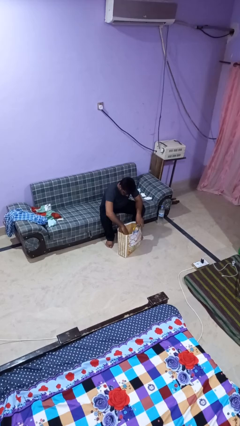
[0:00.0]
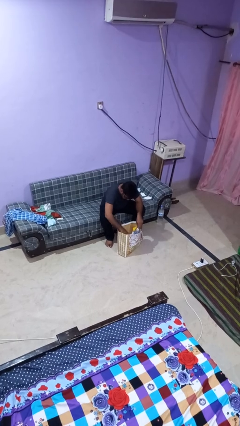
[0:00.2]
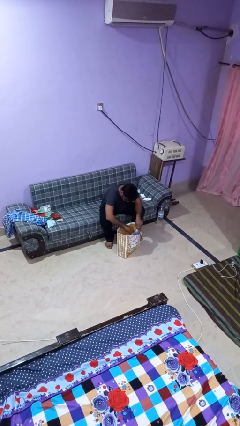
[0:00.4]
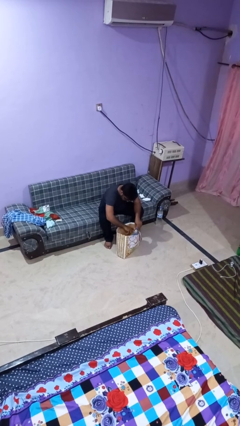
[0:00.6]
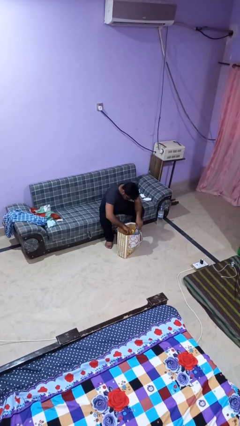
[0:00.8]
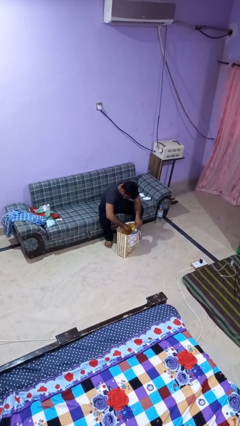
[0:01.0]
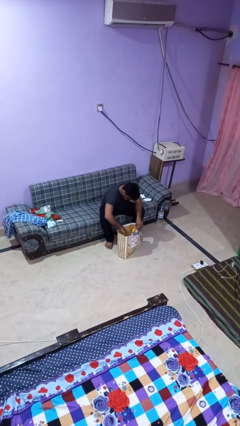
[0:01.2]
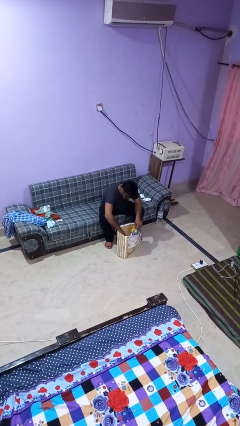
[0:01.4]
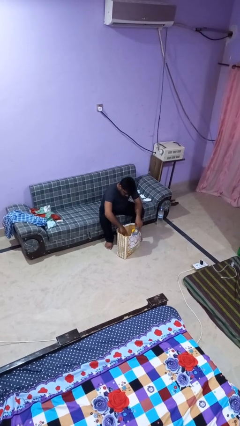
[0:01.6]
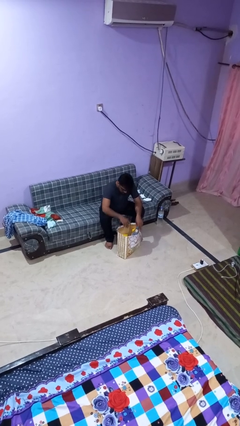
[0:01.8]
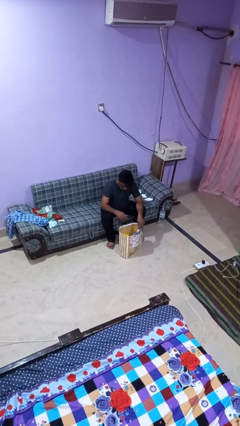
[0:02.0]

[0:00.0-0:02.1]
person searches in bag

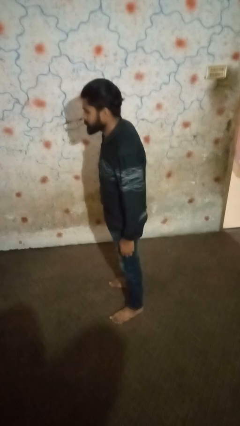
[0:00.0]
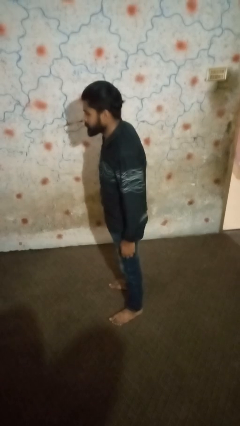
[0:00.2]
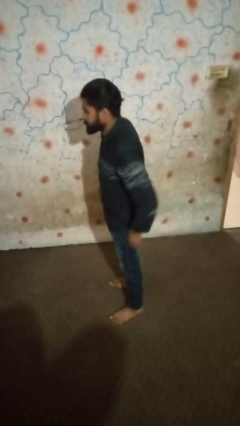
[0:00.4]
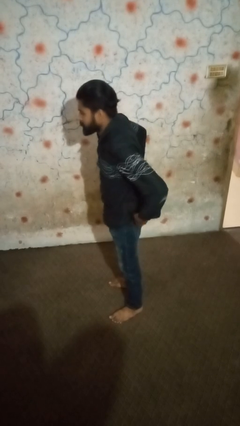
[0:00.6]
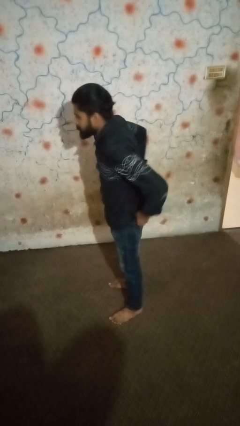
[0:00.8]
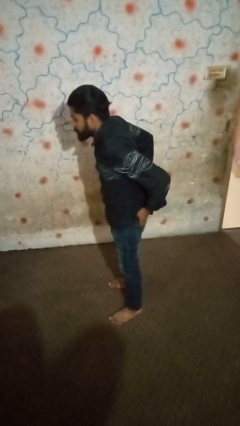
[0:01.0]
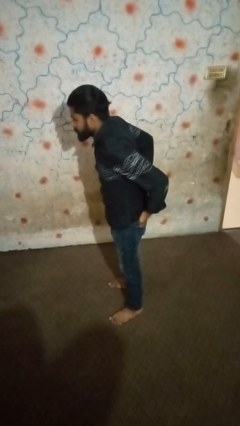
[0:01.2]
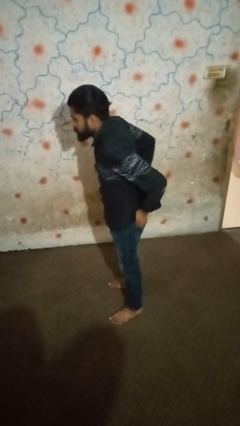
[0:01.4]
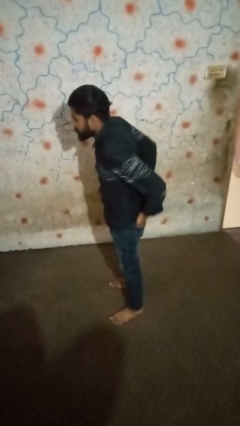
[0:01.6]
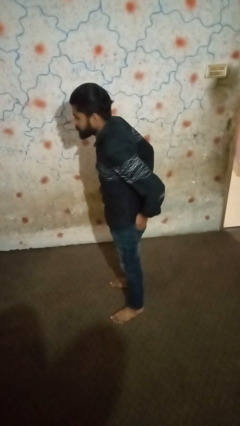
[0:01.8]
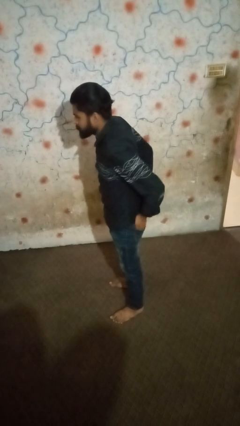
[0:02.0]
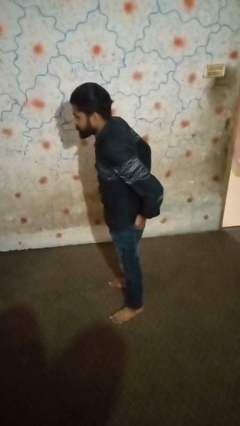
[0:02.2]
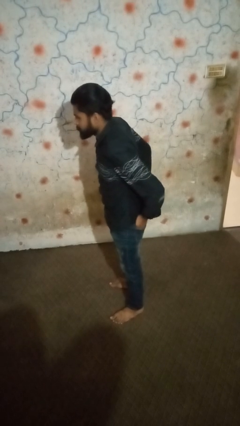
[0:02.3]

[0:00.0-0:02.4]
person puts hands in back pockets

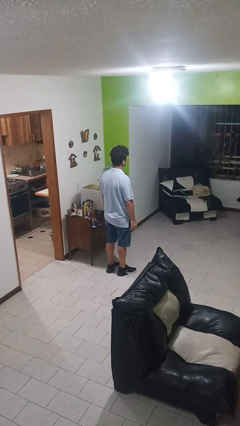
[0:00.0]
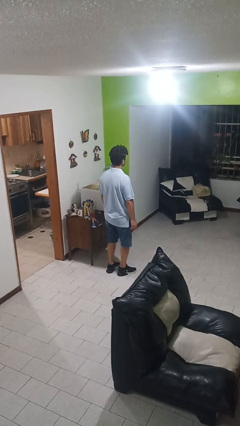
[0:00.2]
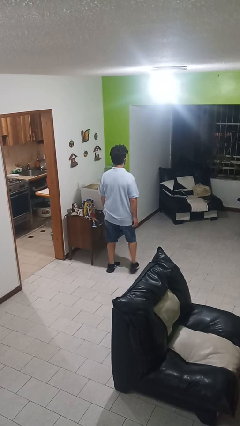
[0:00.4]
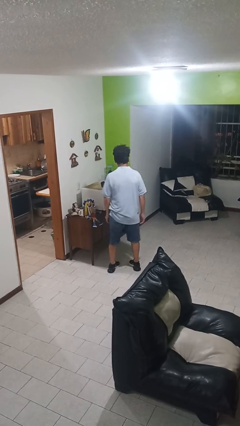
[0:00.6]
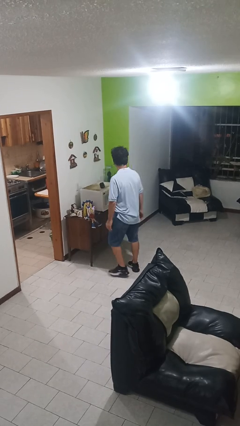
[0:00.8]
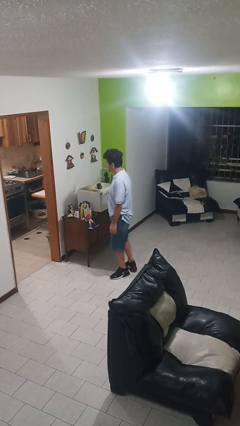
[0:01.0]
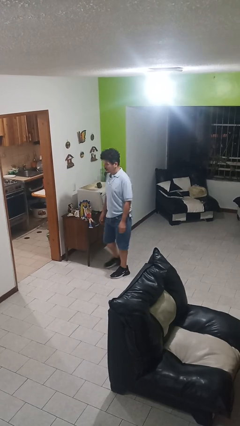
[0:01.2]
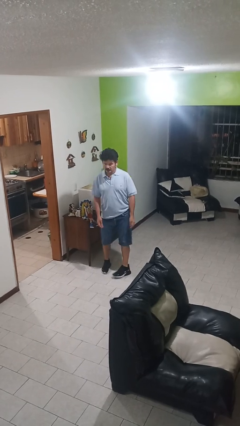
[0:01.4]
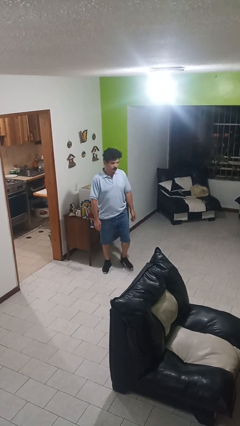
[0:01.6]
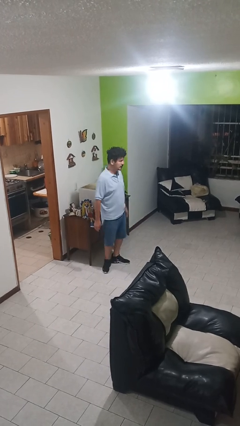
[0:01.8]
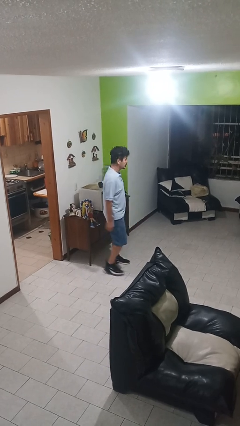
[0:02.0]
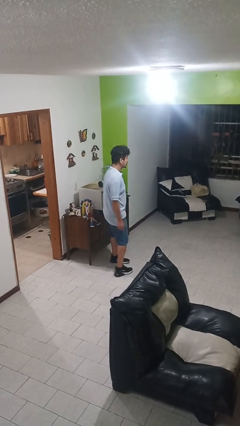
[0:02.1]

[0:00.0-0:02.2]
person twirls

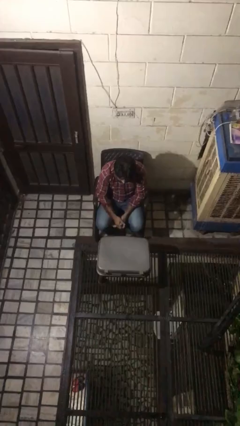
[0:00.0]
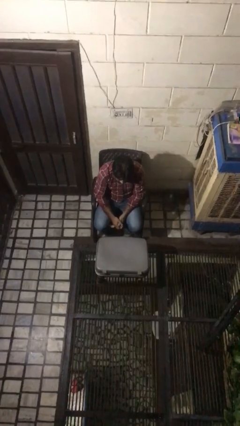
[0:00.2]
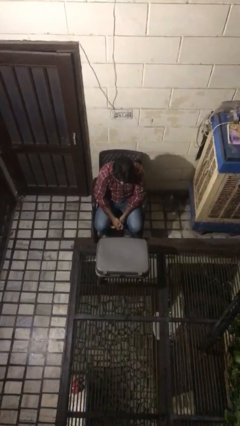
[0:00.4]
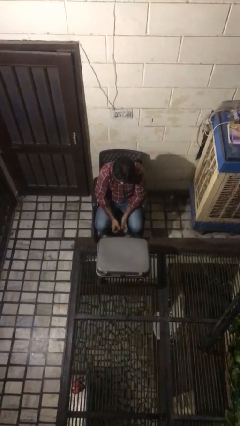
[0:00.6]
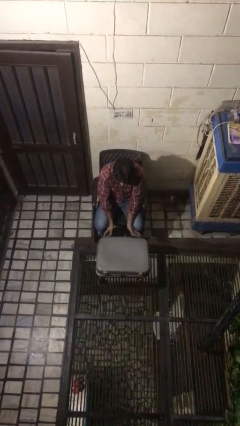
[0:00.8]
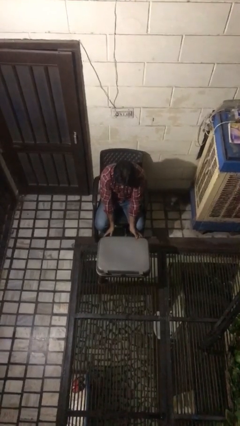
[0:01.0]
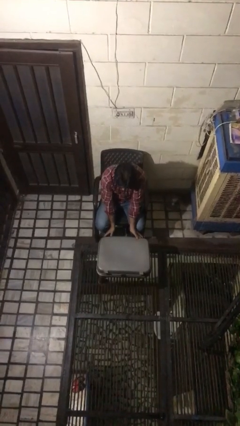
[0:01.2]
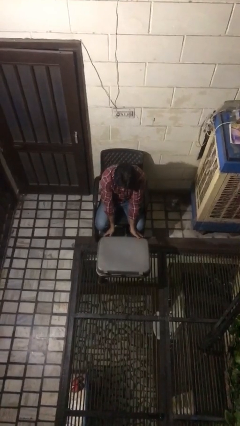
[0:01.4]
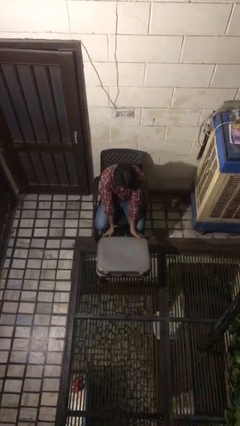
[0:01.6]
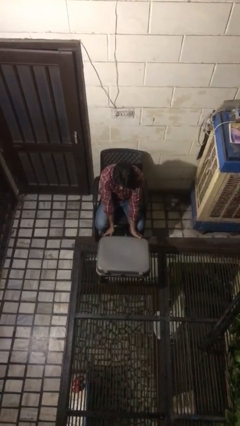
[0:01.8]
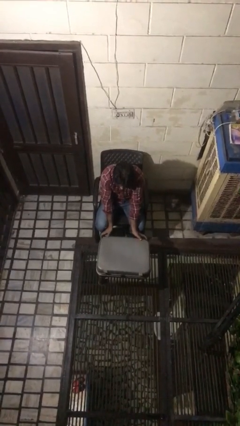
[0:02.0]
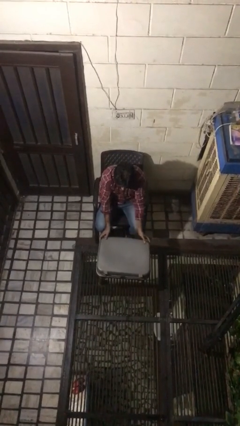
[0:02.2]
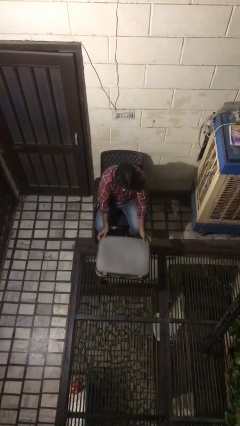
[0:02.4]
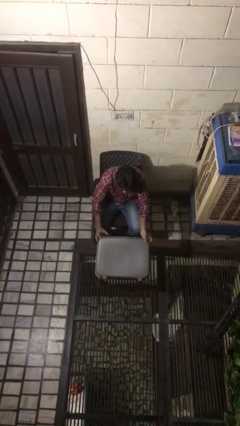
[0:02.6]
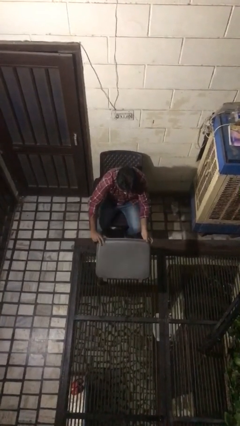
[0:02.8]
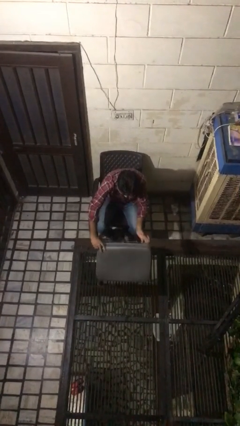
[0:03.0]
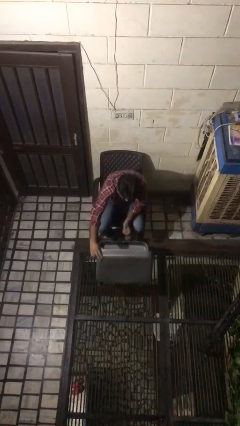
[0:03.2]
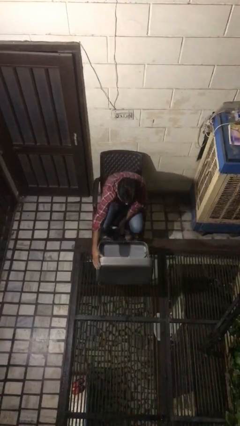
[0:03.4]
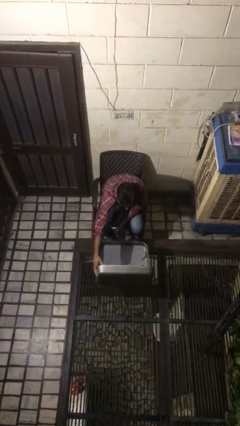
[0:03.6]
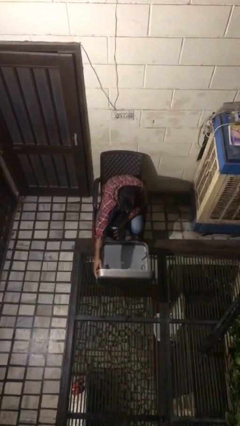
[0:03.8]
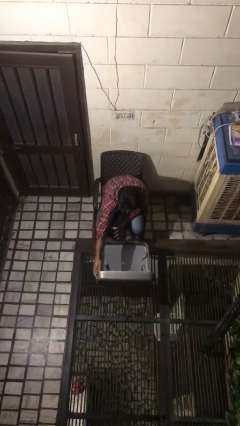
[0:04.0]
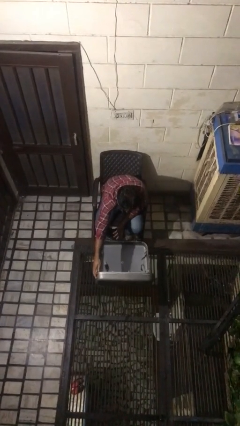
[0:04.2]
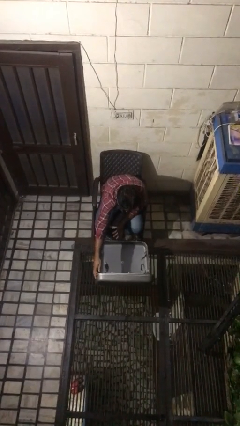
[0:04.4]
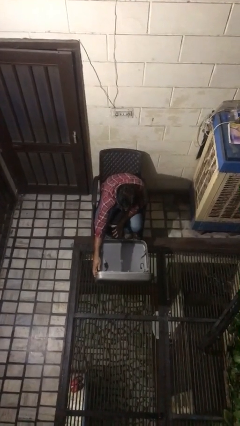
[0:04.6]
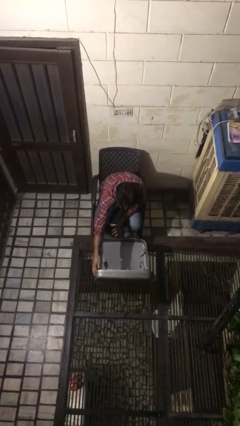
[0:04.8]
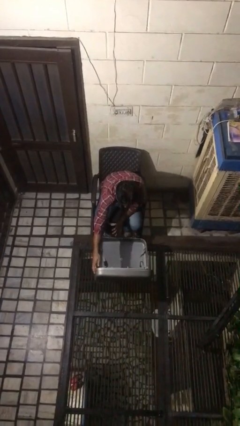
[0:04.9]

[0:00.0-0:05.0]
person opens suitcase

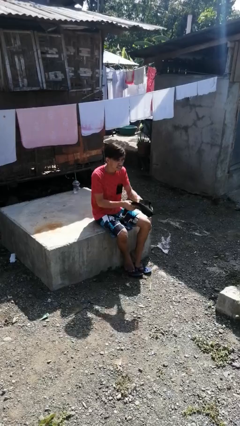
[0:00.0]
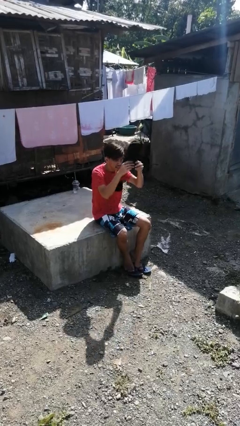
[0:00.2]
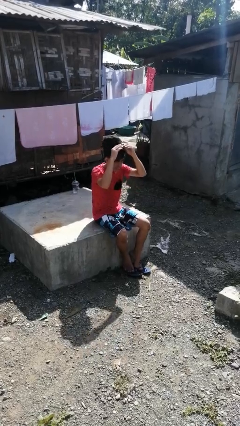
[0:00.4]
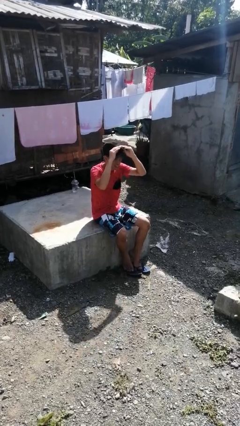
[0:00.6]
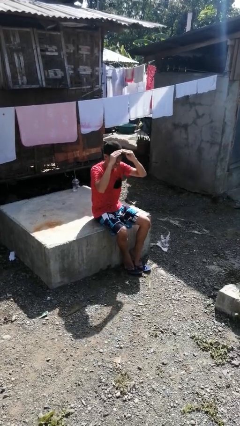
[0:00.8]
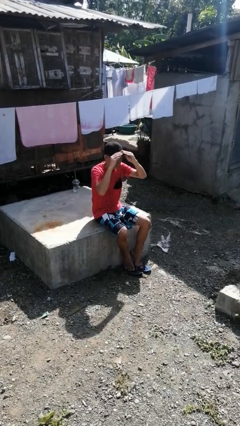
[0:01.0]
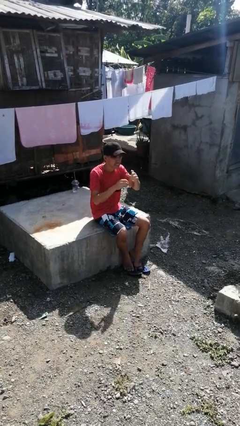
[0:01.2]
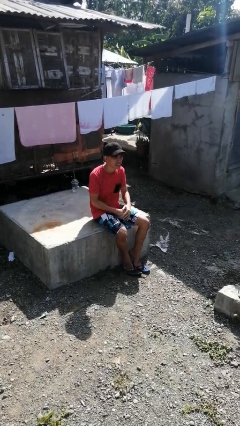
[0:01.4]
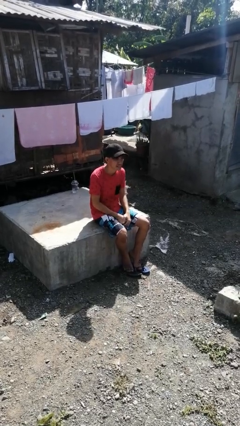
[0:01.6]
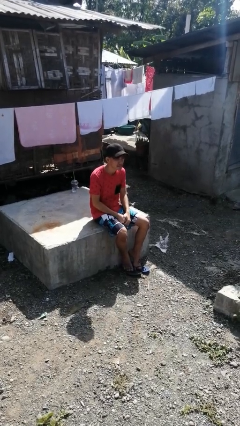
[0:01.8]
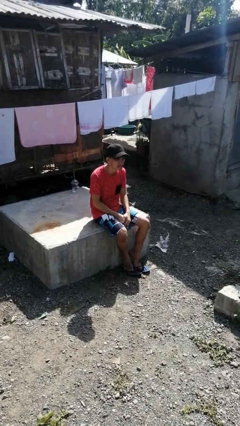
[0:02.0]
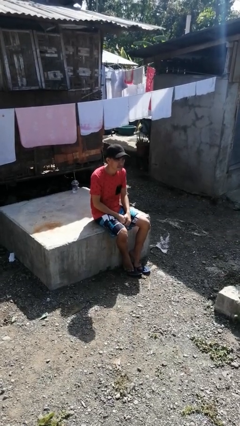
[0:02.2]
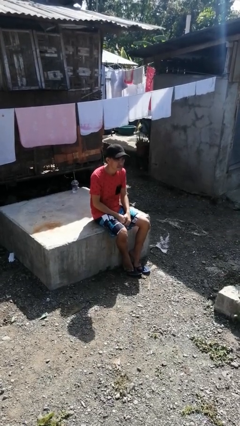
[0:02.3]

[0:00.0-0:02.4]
person puts on hat

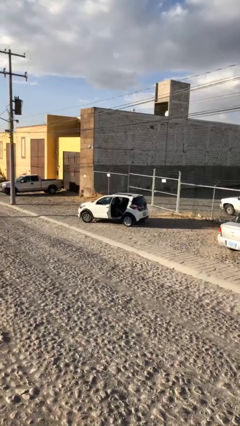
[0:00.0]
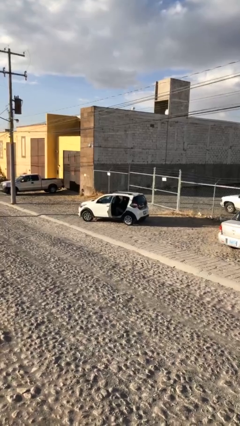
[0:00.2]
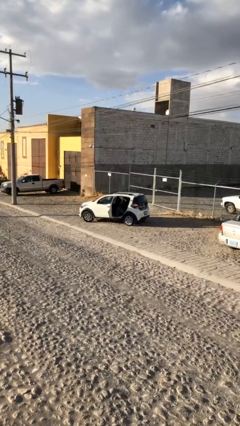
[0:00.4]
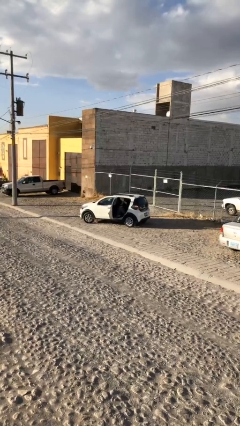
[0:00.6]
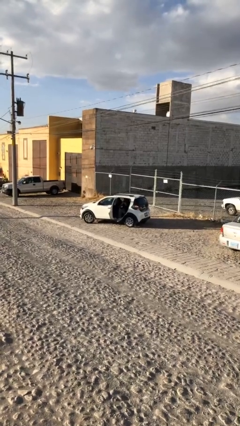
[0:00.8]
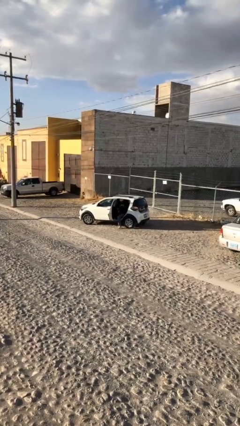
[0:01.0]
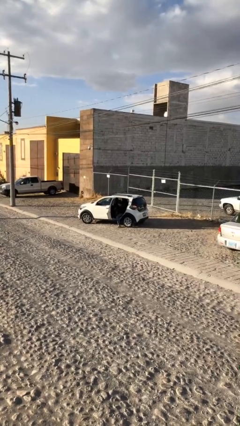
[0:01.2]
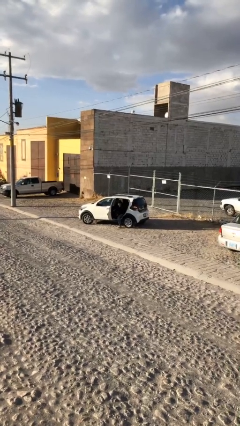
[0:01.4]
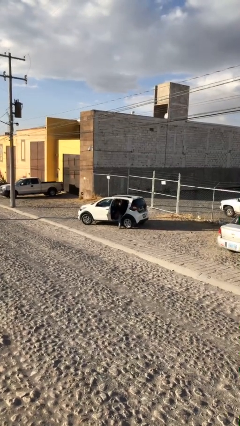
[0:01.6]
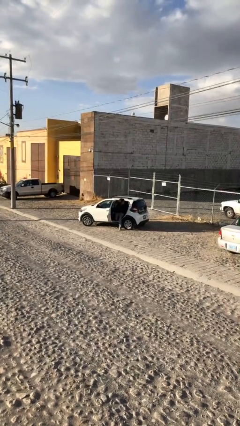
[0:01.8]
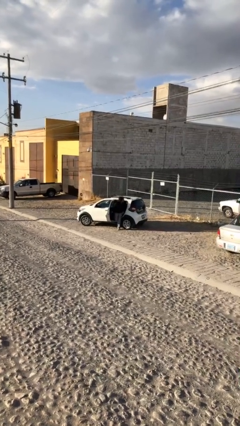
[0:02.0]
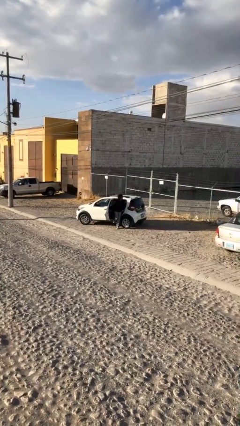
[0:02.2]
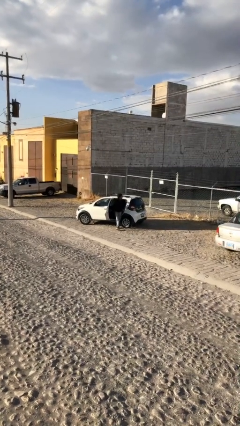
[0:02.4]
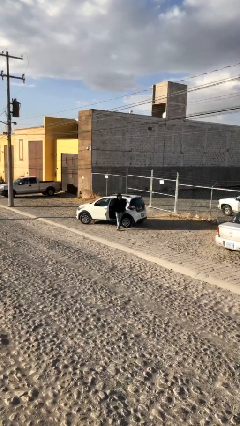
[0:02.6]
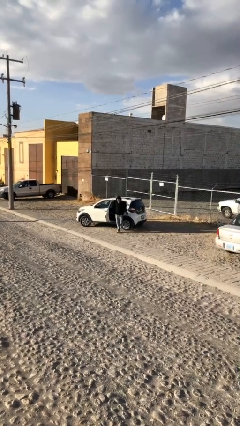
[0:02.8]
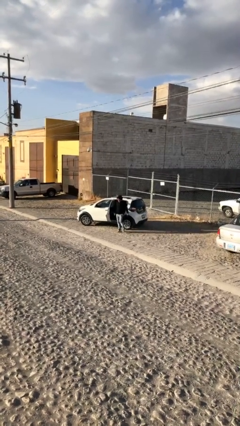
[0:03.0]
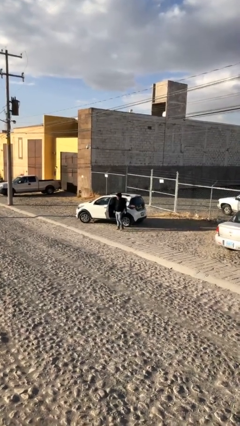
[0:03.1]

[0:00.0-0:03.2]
person exits car
